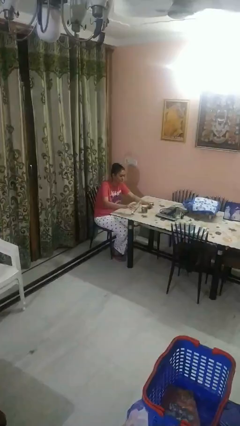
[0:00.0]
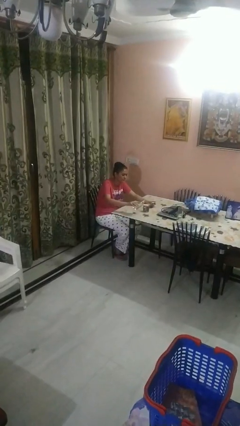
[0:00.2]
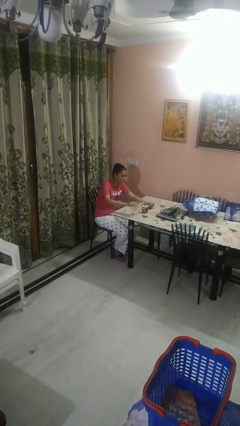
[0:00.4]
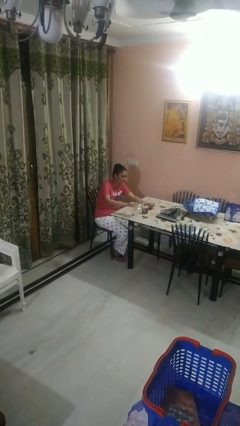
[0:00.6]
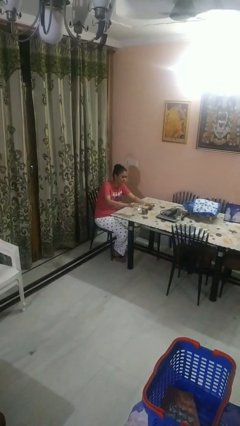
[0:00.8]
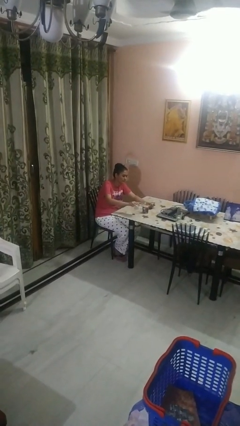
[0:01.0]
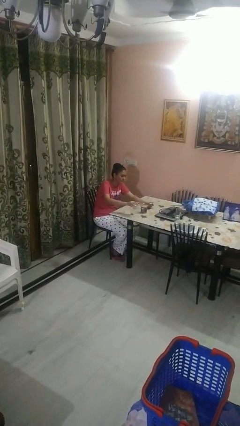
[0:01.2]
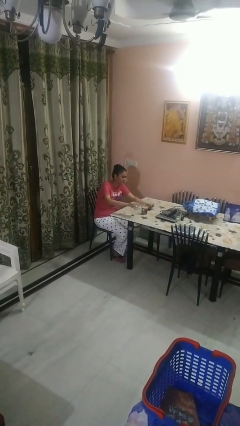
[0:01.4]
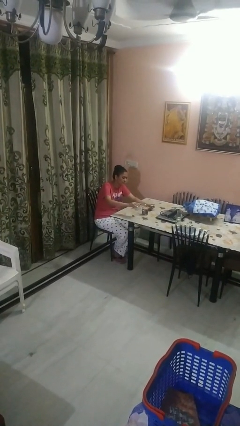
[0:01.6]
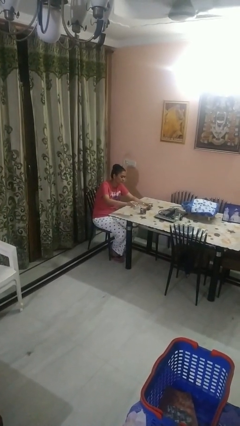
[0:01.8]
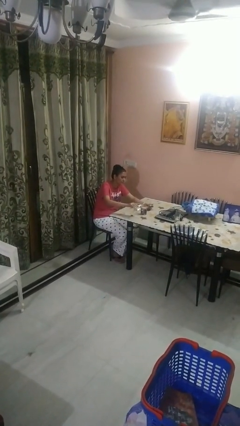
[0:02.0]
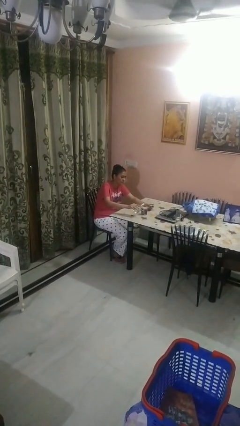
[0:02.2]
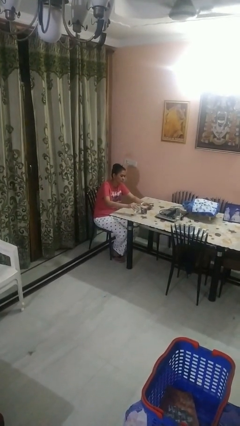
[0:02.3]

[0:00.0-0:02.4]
person pours liquid into cup

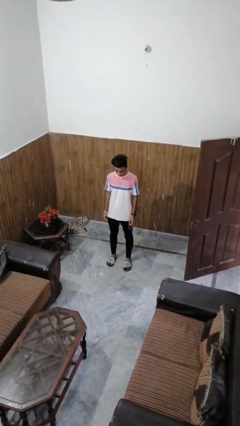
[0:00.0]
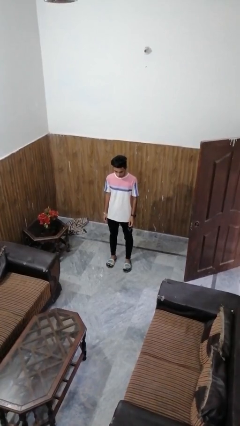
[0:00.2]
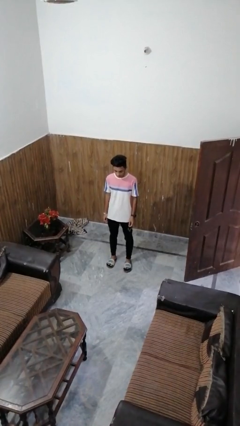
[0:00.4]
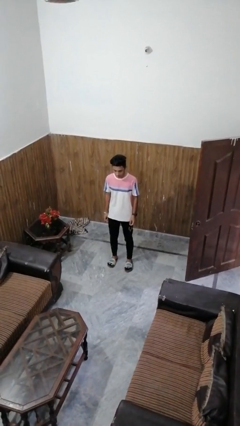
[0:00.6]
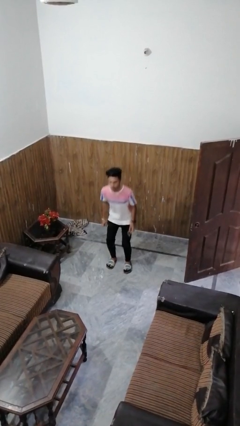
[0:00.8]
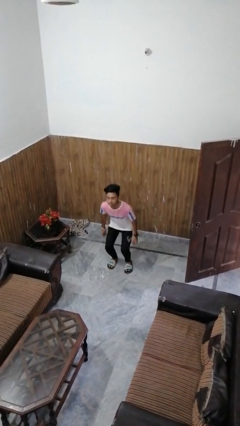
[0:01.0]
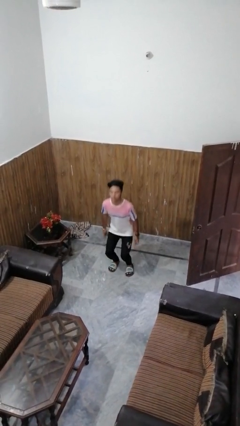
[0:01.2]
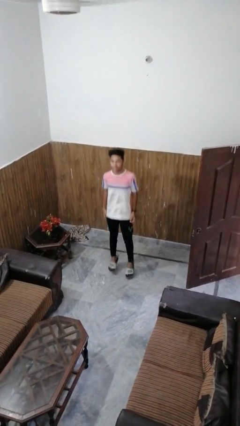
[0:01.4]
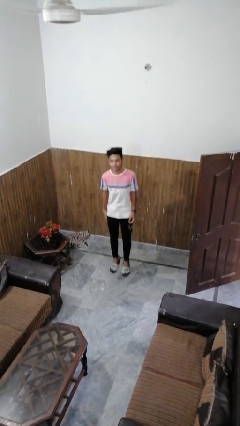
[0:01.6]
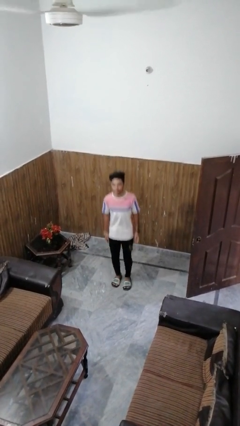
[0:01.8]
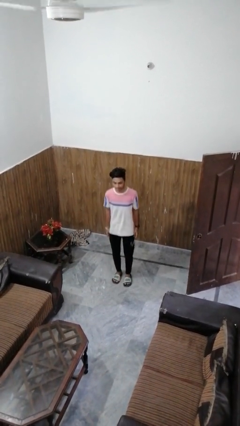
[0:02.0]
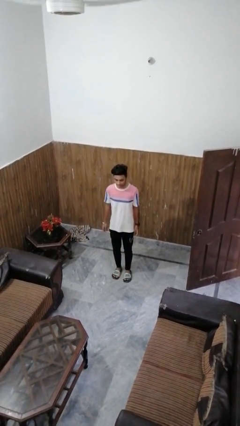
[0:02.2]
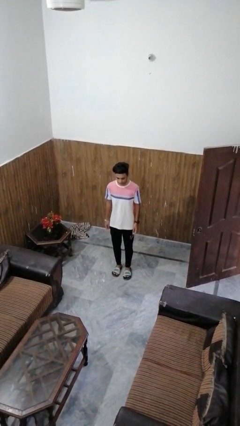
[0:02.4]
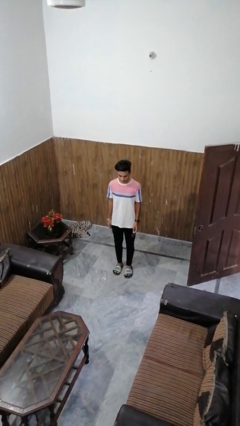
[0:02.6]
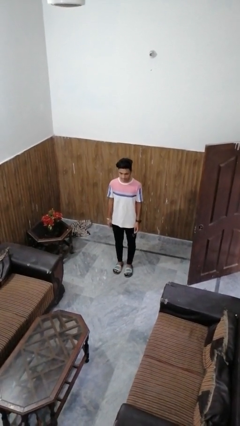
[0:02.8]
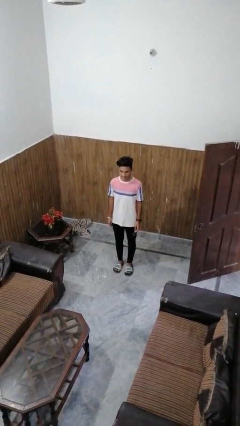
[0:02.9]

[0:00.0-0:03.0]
person jumps

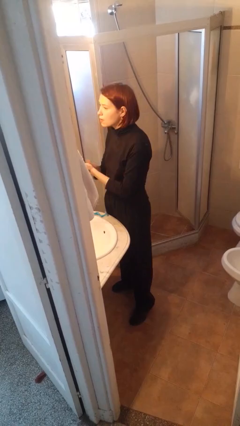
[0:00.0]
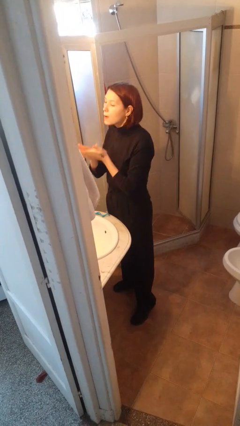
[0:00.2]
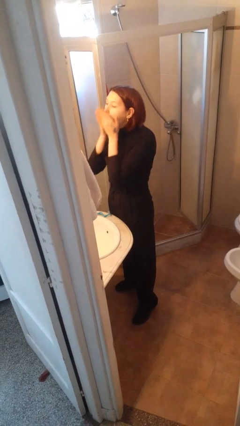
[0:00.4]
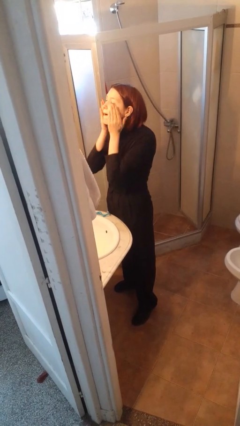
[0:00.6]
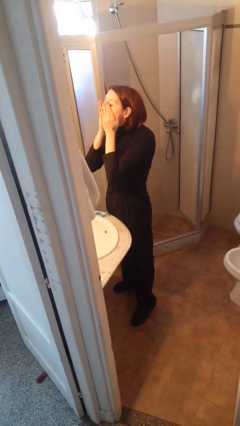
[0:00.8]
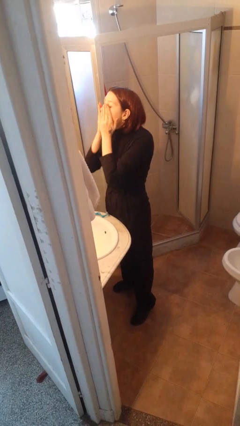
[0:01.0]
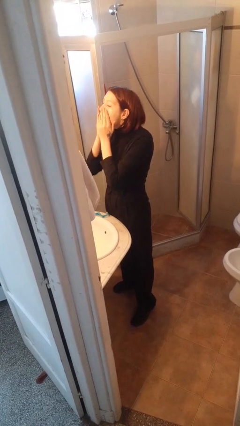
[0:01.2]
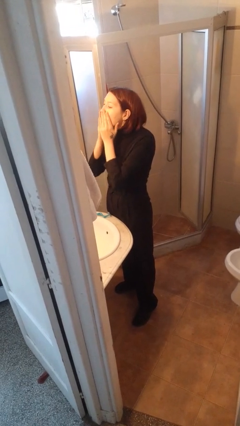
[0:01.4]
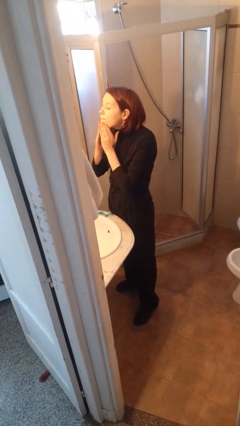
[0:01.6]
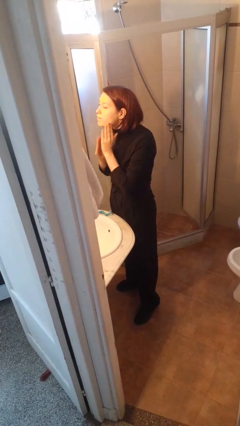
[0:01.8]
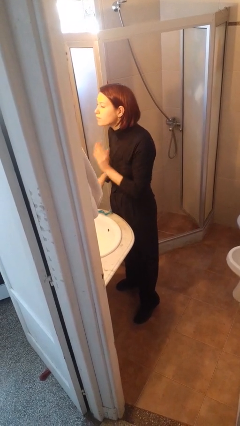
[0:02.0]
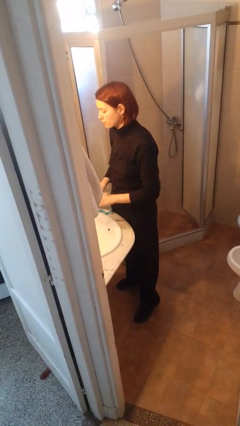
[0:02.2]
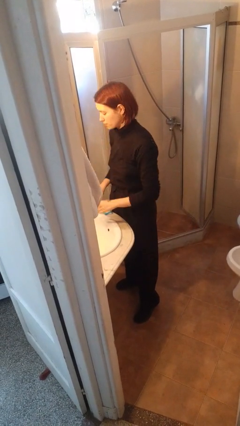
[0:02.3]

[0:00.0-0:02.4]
person applies shaving cream

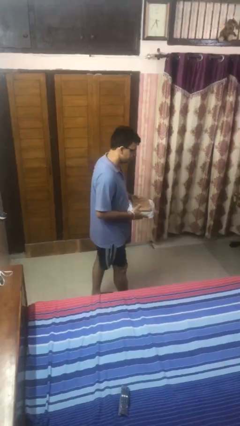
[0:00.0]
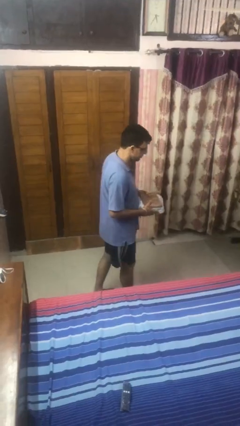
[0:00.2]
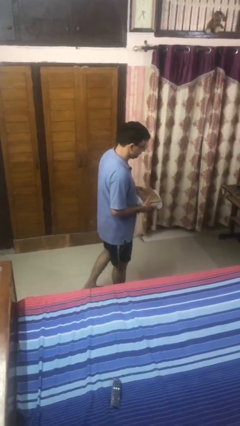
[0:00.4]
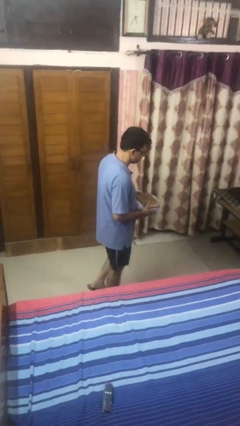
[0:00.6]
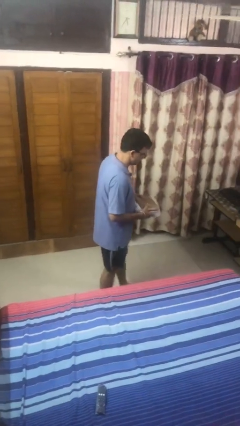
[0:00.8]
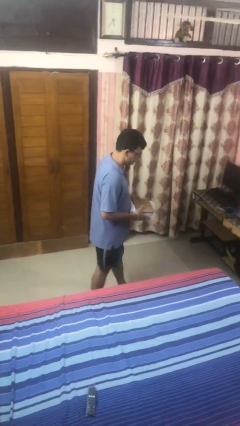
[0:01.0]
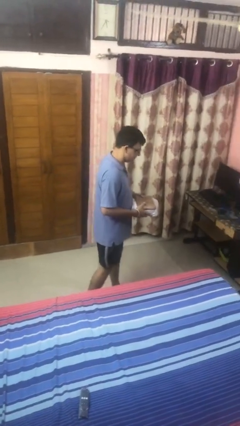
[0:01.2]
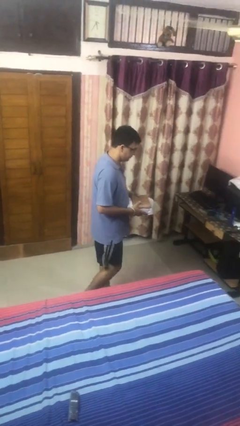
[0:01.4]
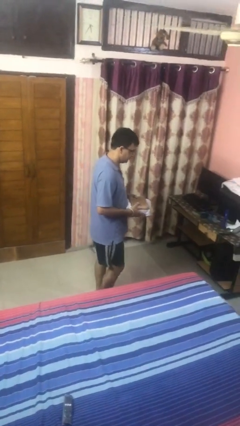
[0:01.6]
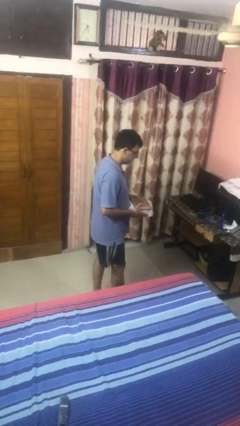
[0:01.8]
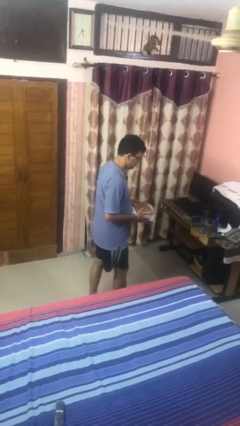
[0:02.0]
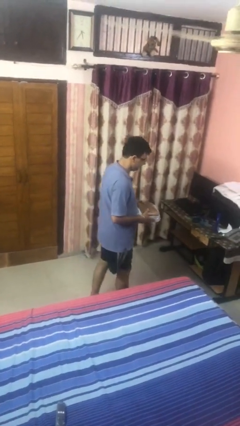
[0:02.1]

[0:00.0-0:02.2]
person carries groceries

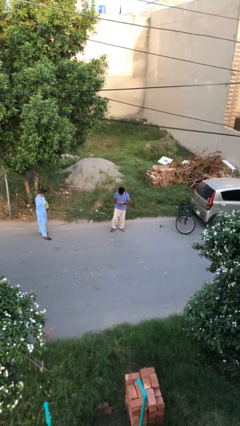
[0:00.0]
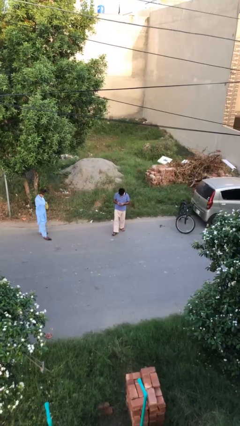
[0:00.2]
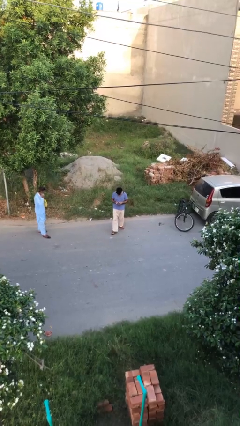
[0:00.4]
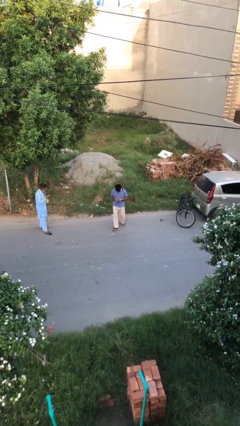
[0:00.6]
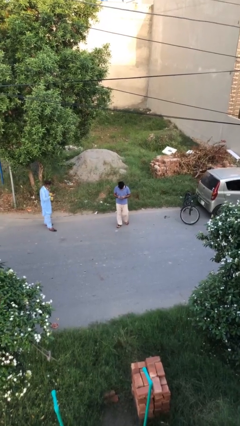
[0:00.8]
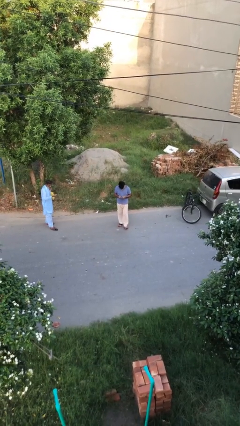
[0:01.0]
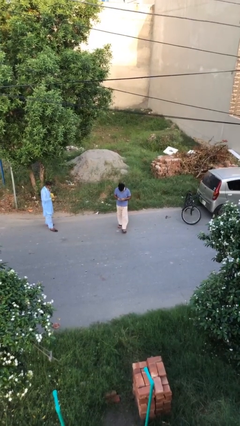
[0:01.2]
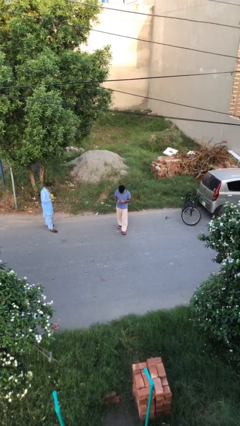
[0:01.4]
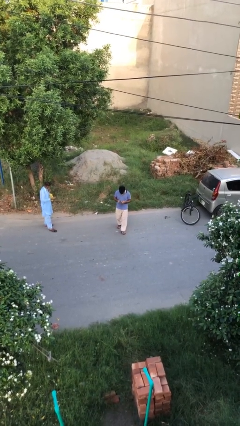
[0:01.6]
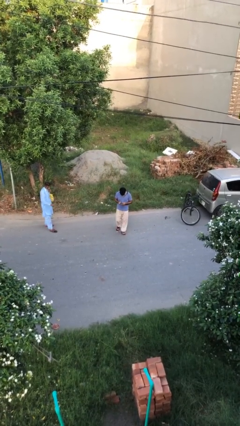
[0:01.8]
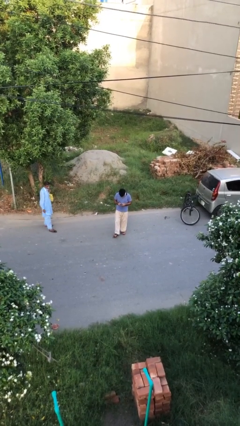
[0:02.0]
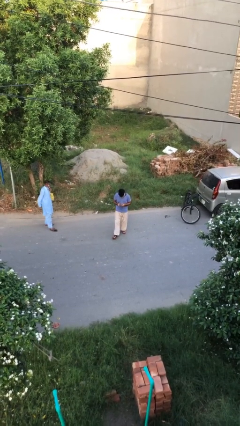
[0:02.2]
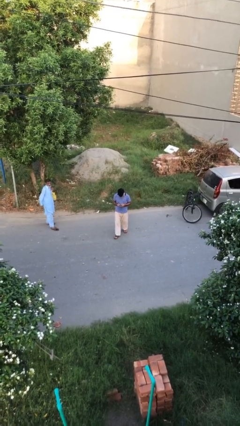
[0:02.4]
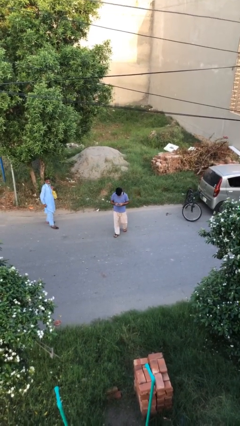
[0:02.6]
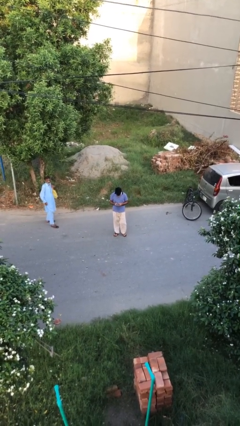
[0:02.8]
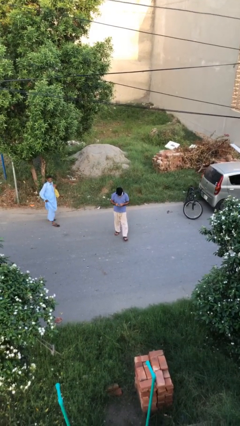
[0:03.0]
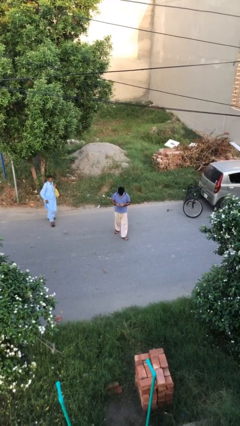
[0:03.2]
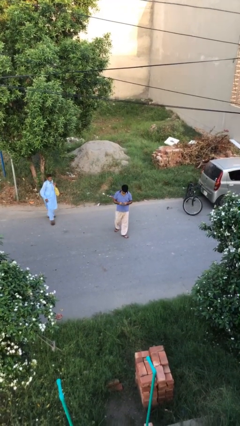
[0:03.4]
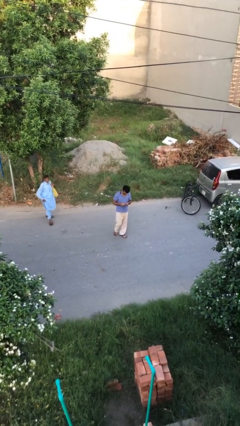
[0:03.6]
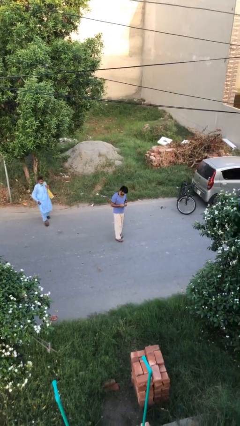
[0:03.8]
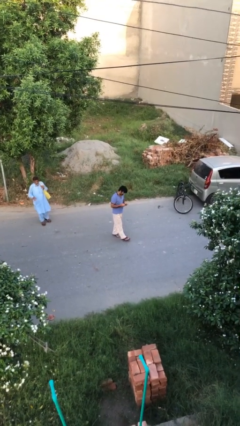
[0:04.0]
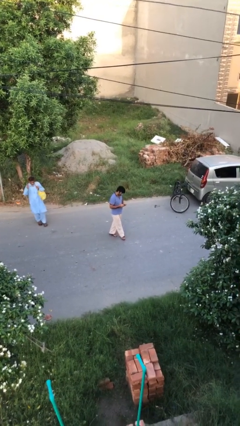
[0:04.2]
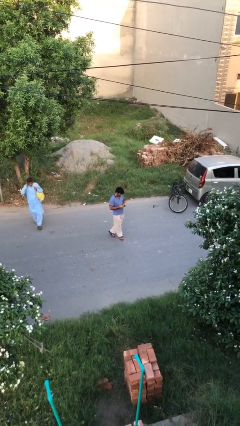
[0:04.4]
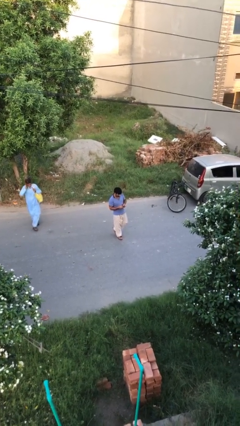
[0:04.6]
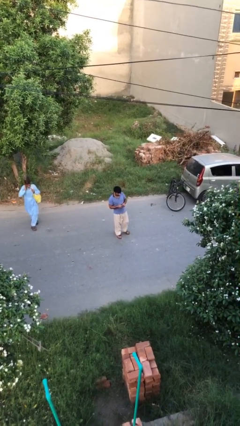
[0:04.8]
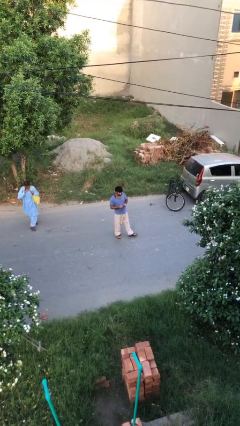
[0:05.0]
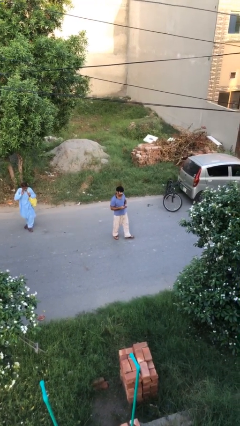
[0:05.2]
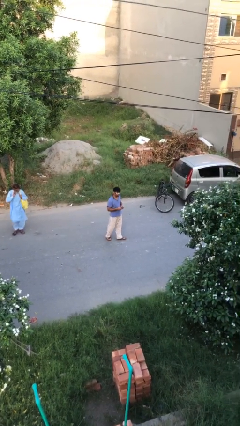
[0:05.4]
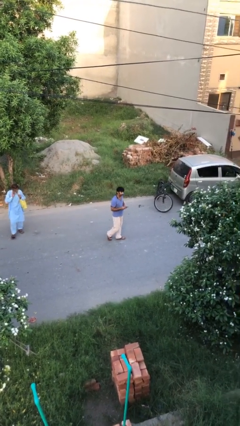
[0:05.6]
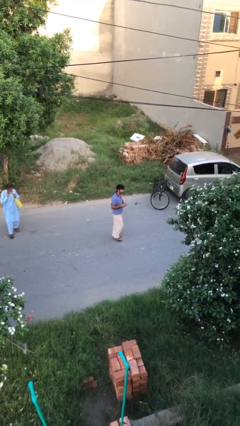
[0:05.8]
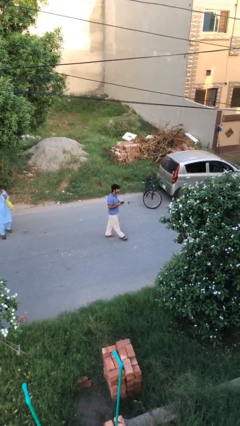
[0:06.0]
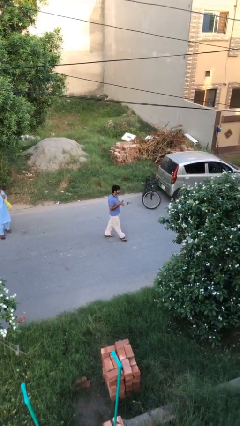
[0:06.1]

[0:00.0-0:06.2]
person texts on phone

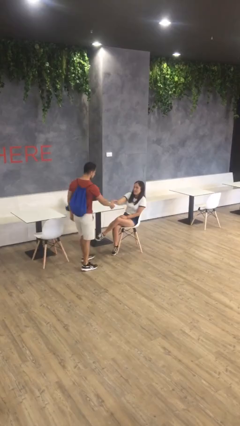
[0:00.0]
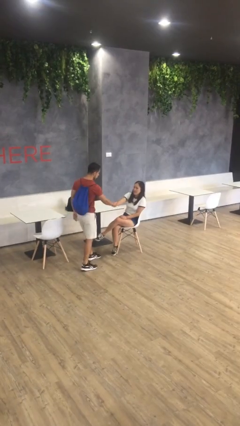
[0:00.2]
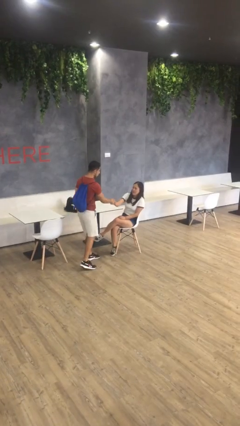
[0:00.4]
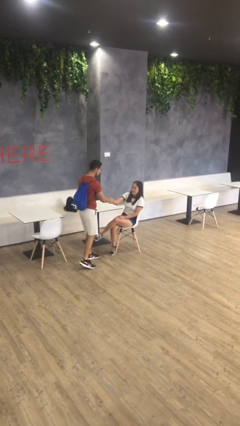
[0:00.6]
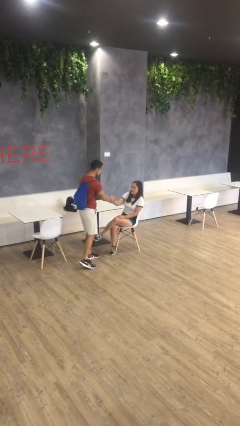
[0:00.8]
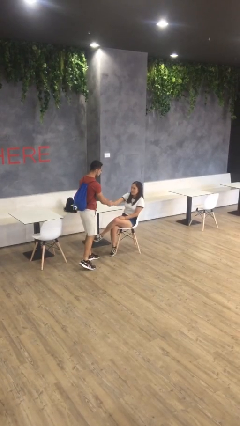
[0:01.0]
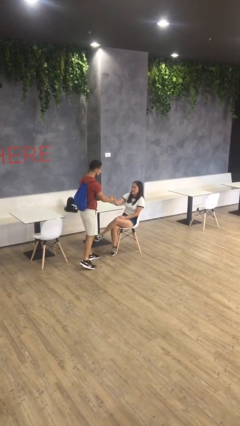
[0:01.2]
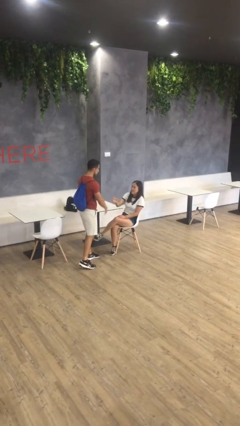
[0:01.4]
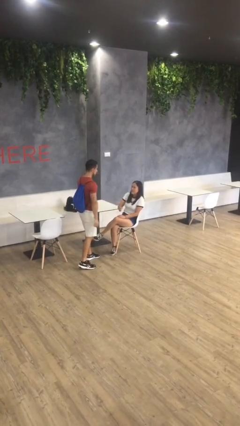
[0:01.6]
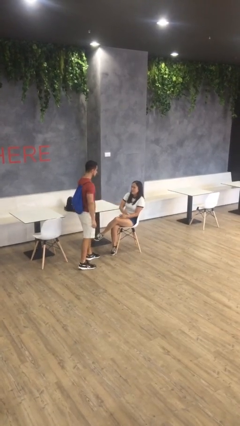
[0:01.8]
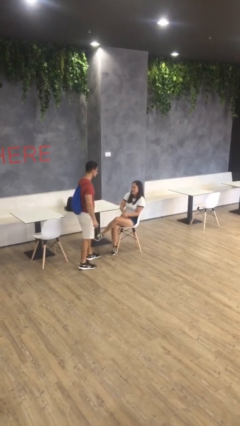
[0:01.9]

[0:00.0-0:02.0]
person shakes hand
